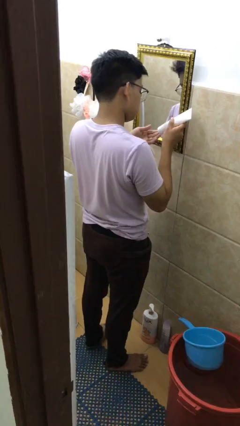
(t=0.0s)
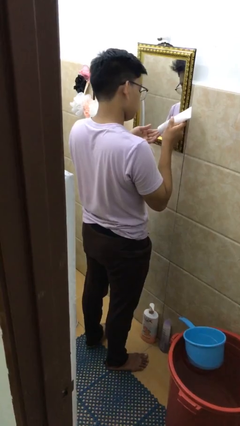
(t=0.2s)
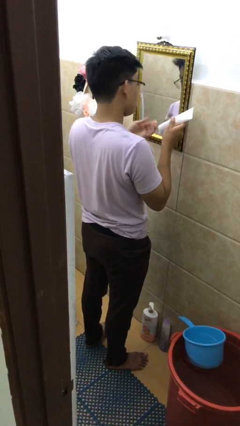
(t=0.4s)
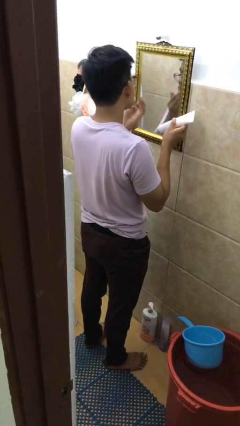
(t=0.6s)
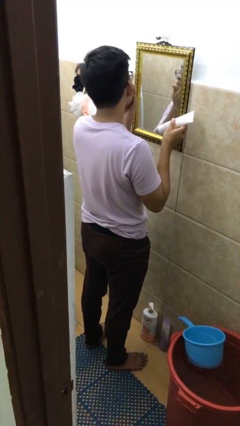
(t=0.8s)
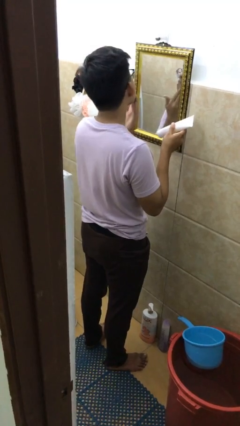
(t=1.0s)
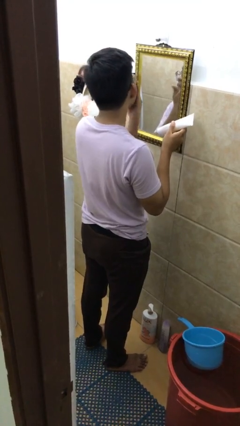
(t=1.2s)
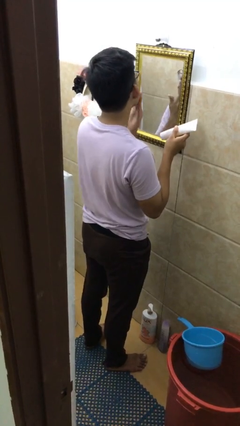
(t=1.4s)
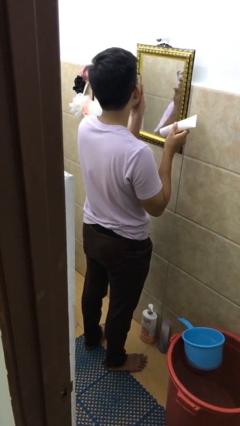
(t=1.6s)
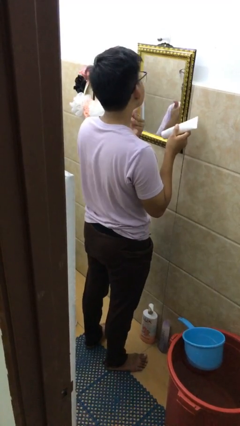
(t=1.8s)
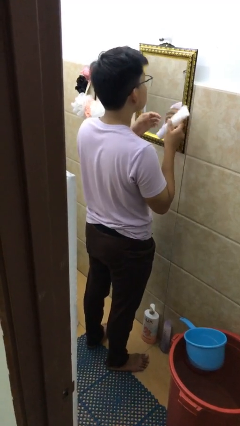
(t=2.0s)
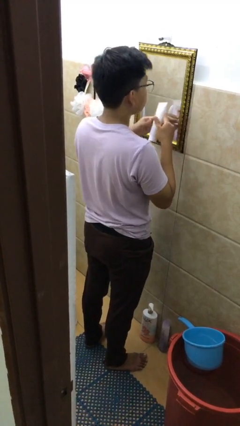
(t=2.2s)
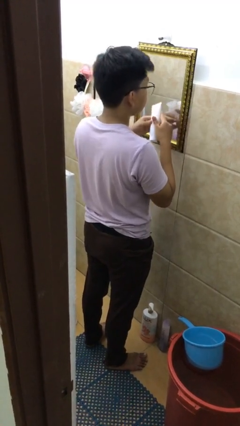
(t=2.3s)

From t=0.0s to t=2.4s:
person applies facial moisturizer

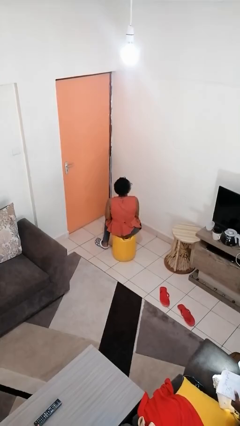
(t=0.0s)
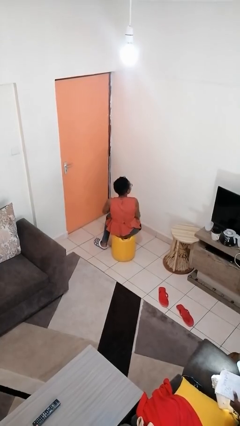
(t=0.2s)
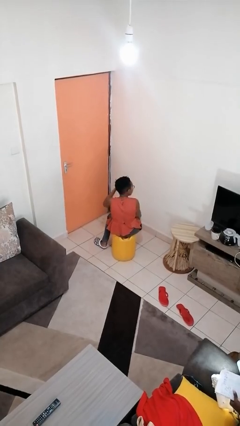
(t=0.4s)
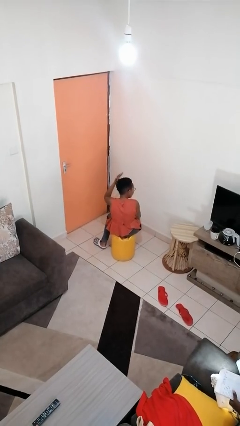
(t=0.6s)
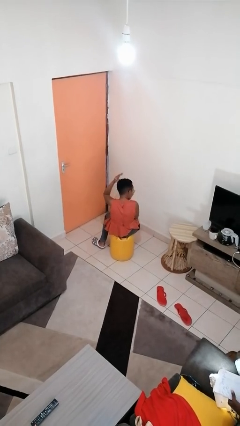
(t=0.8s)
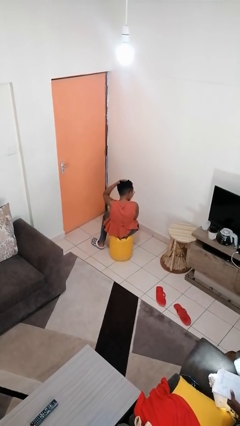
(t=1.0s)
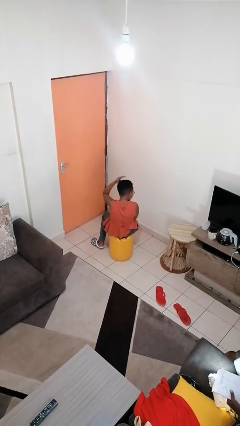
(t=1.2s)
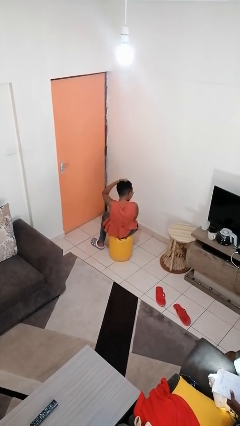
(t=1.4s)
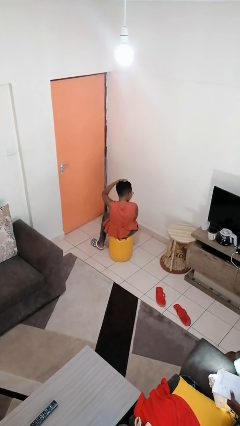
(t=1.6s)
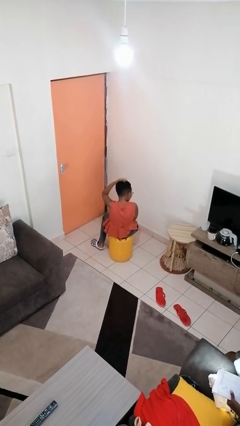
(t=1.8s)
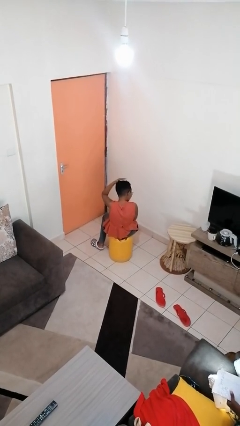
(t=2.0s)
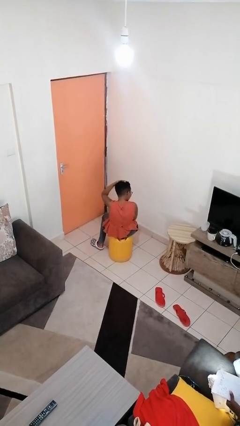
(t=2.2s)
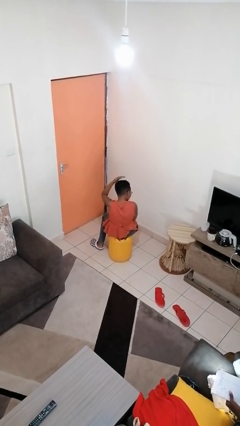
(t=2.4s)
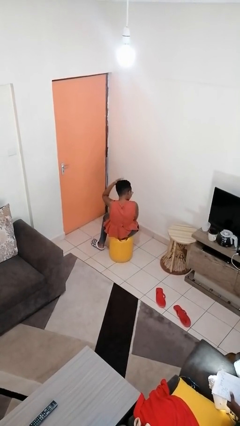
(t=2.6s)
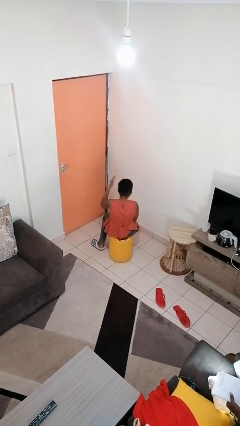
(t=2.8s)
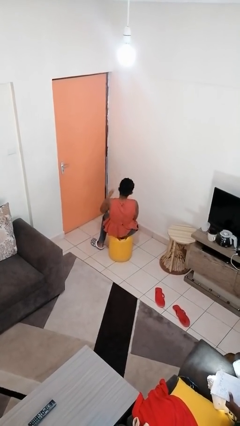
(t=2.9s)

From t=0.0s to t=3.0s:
person pats head

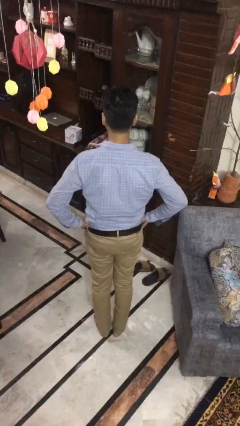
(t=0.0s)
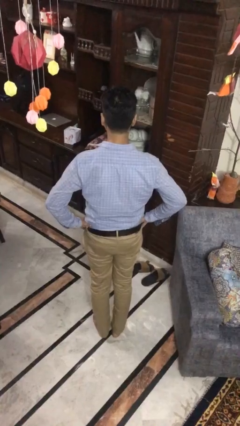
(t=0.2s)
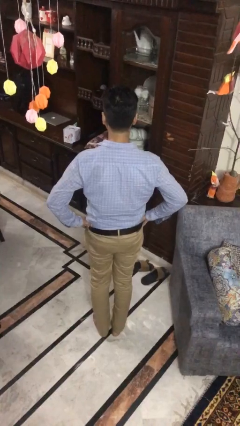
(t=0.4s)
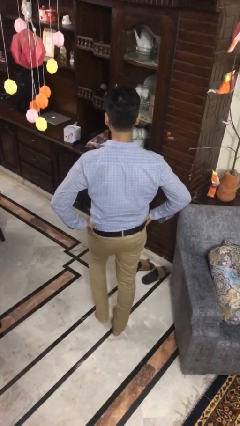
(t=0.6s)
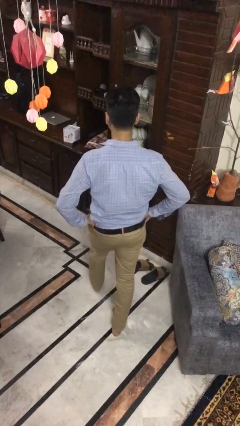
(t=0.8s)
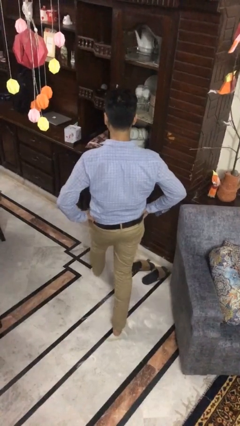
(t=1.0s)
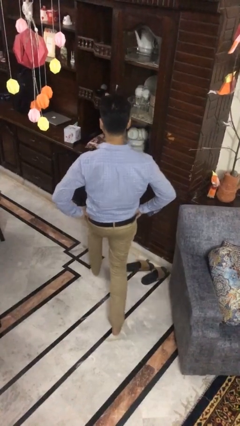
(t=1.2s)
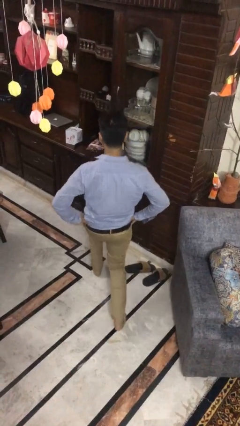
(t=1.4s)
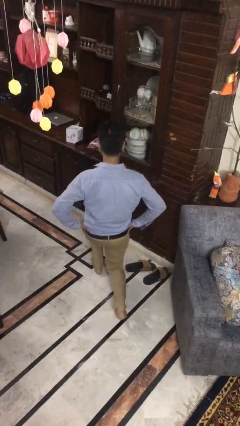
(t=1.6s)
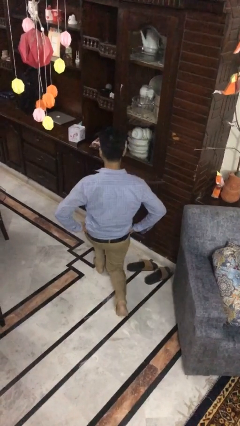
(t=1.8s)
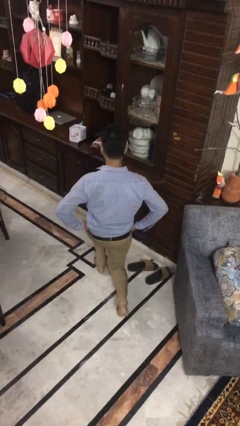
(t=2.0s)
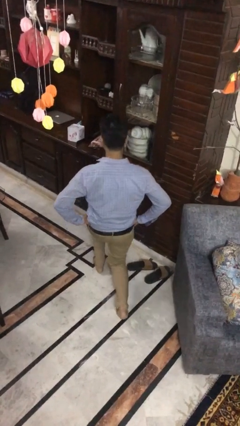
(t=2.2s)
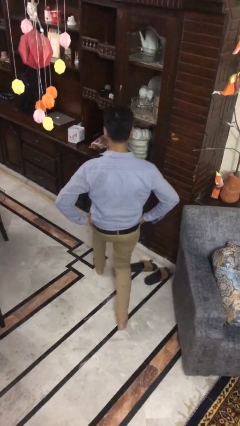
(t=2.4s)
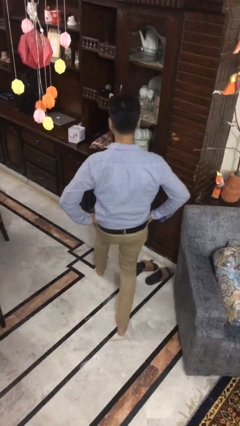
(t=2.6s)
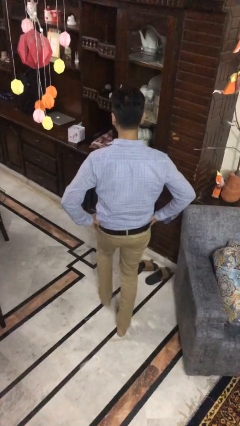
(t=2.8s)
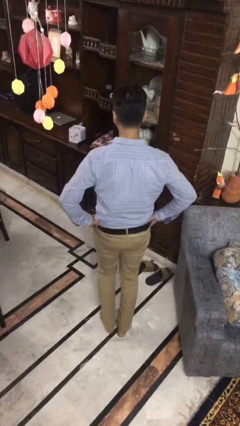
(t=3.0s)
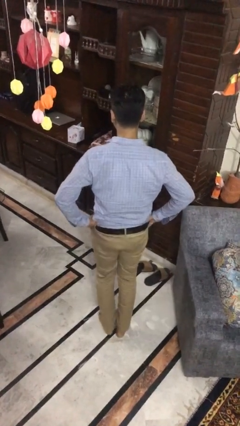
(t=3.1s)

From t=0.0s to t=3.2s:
person exercises with lunges

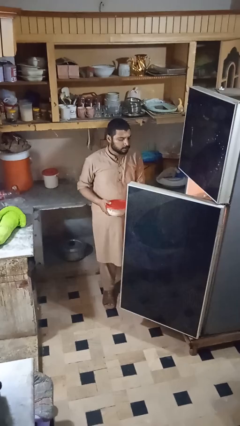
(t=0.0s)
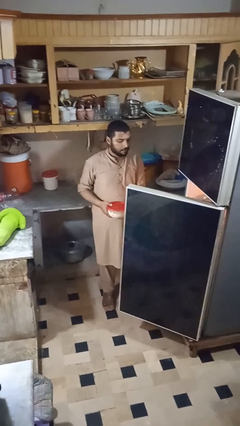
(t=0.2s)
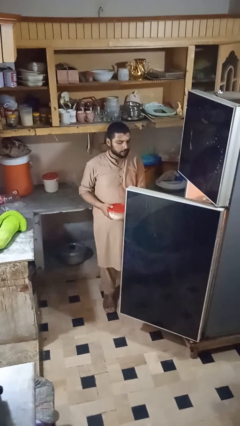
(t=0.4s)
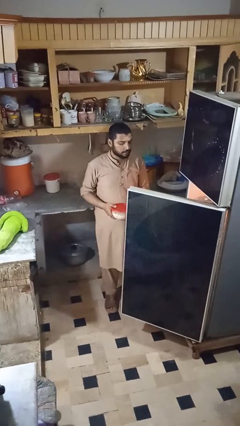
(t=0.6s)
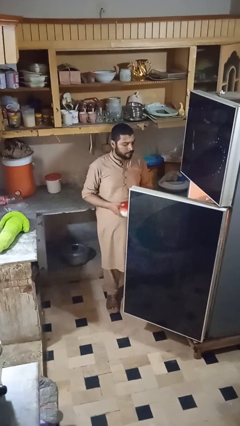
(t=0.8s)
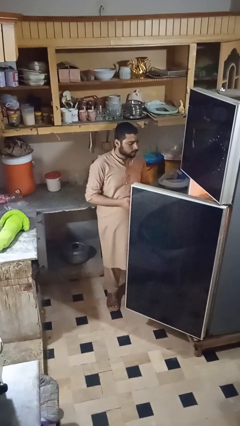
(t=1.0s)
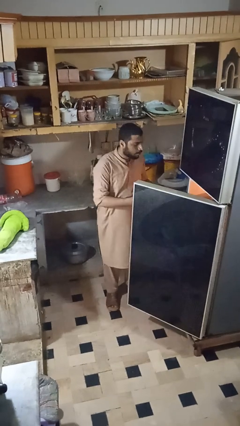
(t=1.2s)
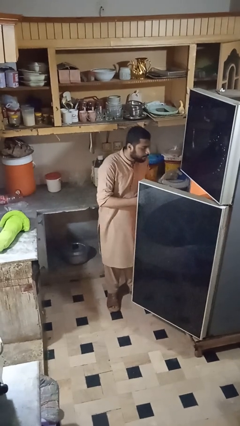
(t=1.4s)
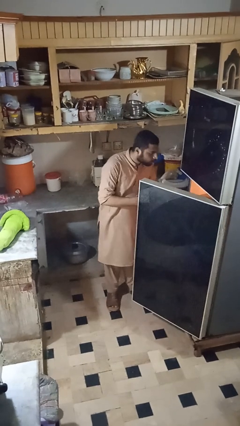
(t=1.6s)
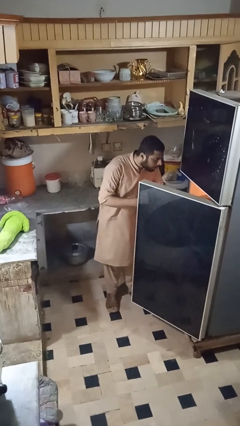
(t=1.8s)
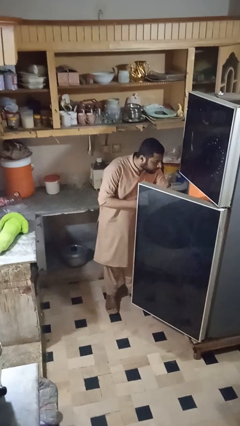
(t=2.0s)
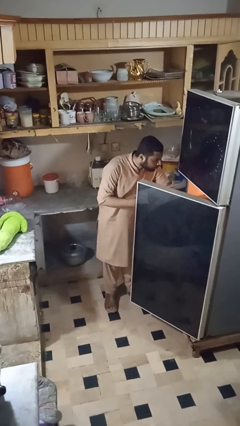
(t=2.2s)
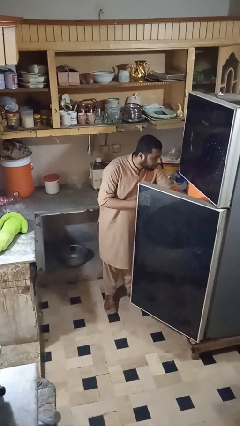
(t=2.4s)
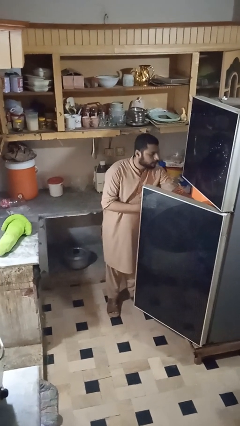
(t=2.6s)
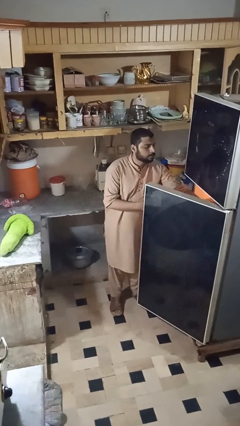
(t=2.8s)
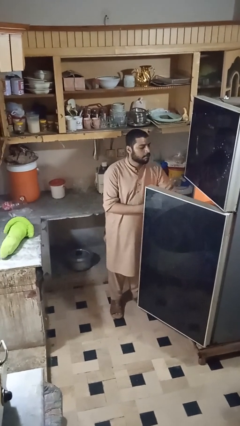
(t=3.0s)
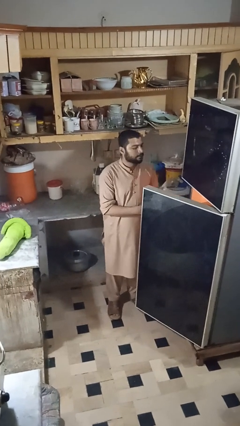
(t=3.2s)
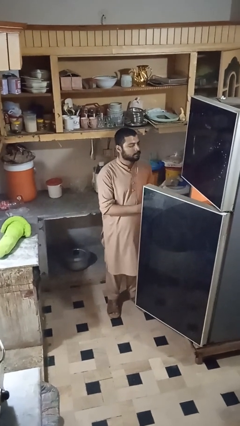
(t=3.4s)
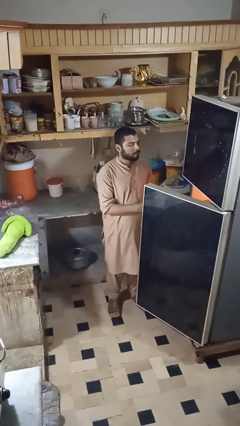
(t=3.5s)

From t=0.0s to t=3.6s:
person puts object into refrigerator

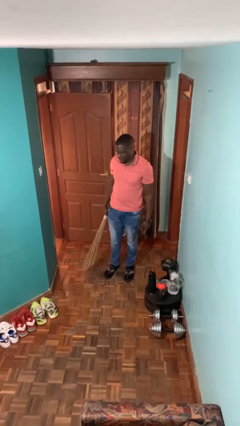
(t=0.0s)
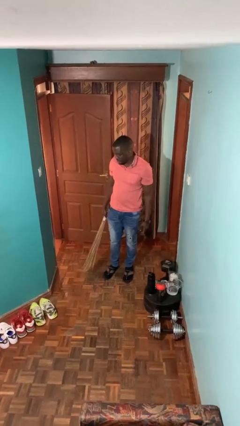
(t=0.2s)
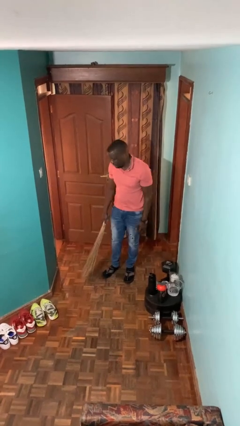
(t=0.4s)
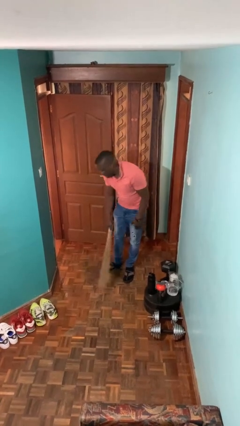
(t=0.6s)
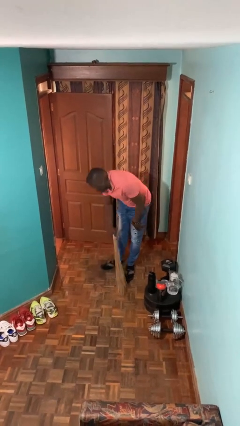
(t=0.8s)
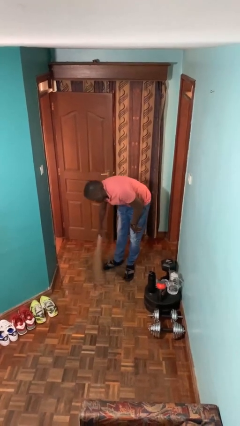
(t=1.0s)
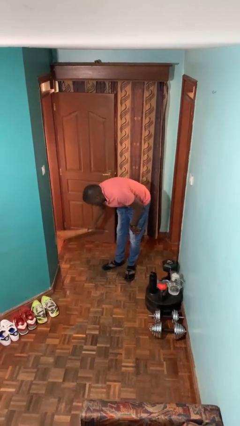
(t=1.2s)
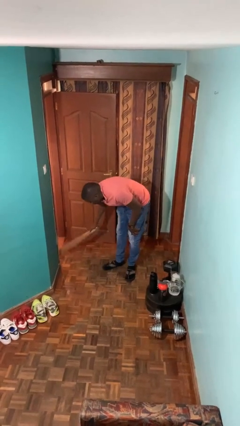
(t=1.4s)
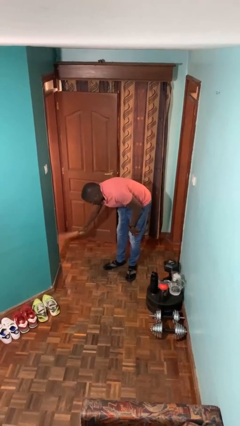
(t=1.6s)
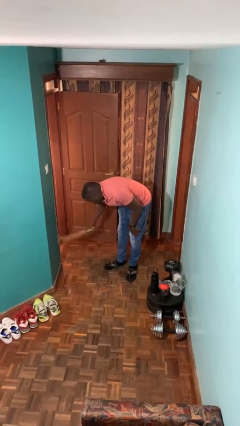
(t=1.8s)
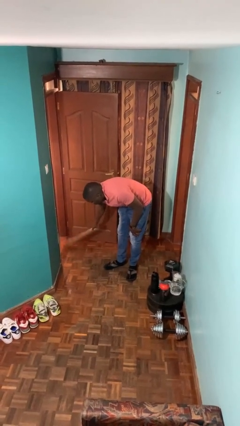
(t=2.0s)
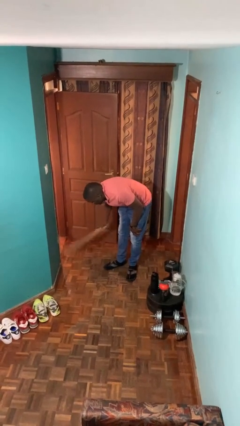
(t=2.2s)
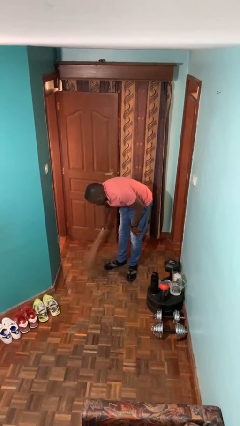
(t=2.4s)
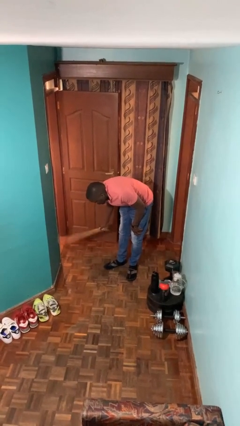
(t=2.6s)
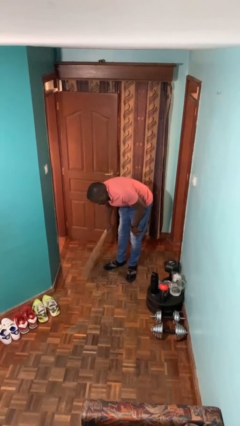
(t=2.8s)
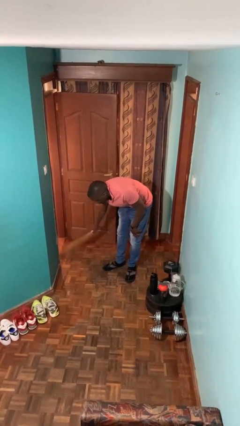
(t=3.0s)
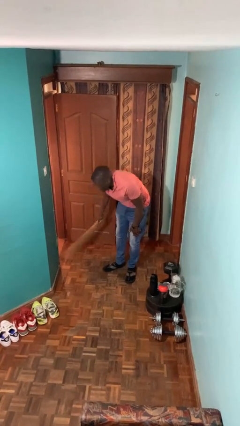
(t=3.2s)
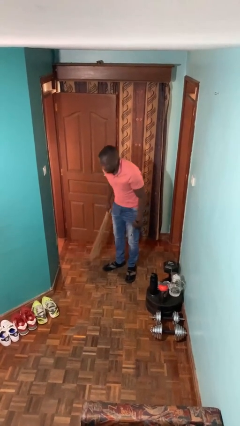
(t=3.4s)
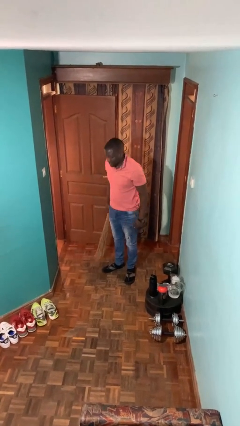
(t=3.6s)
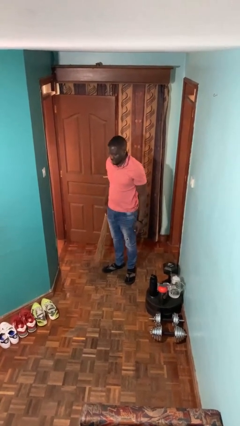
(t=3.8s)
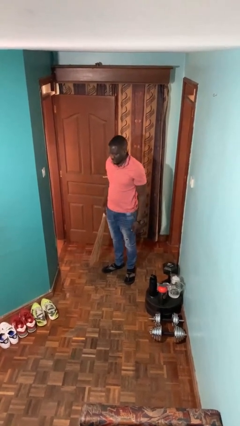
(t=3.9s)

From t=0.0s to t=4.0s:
person sweeps floor

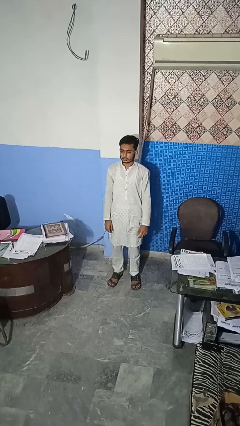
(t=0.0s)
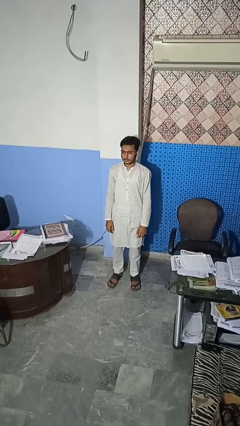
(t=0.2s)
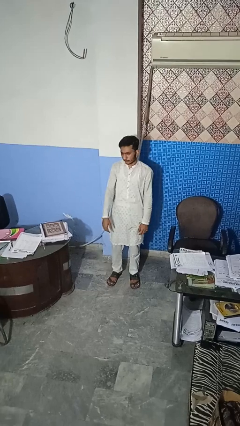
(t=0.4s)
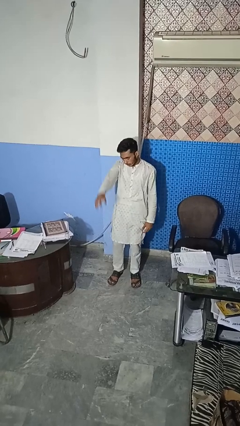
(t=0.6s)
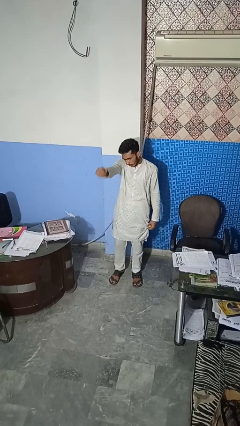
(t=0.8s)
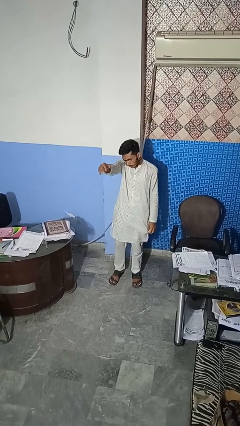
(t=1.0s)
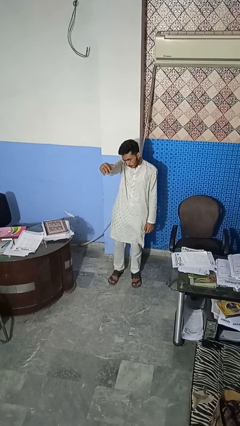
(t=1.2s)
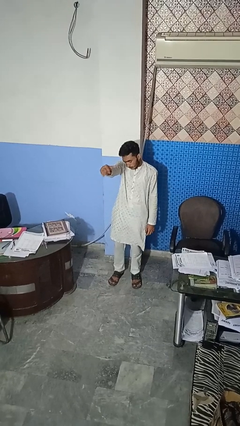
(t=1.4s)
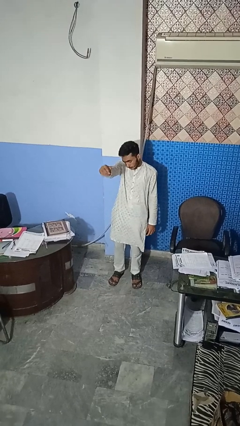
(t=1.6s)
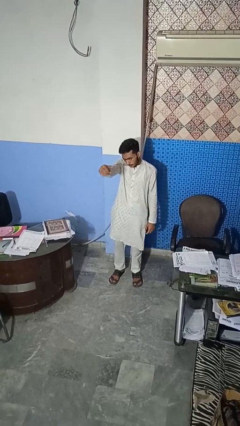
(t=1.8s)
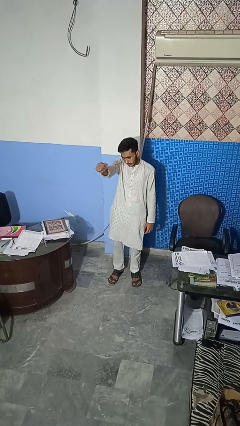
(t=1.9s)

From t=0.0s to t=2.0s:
person gestures come here
